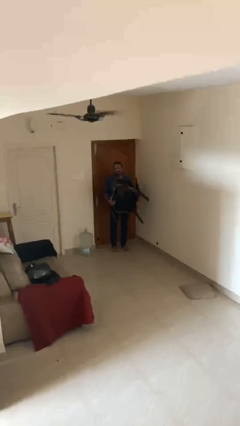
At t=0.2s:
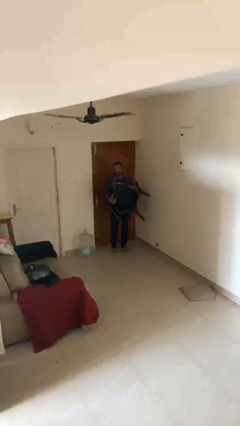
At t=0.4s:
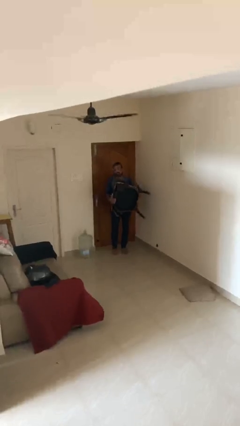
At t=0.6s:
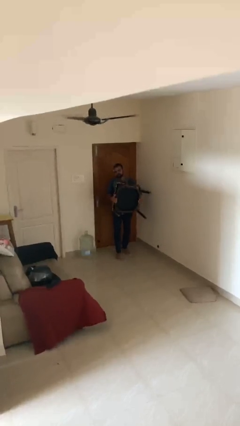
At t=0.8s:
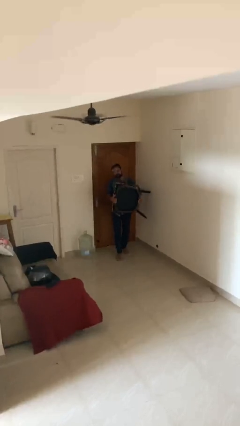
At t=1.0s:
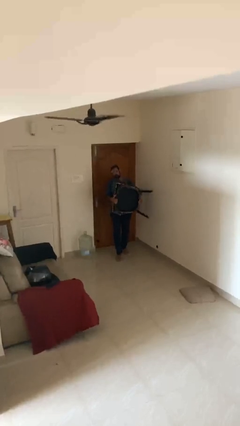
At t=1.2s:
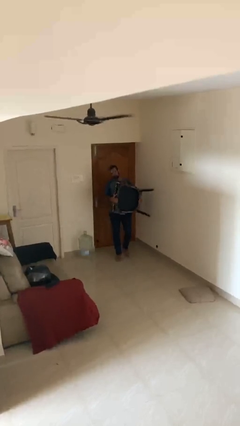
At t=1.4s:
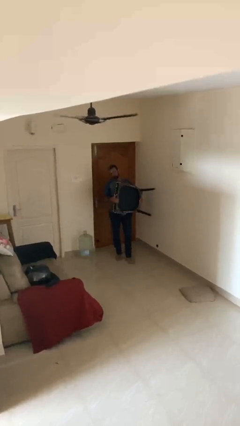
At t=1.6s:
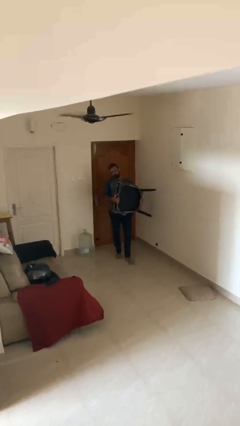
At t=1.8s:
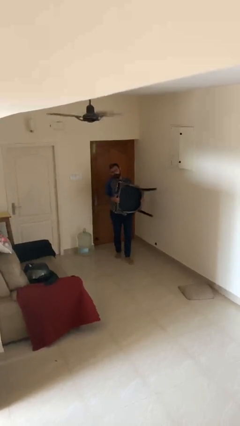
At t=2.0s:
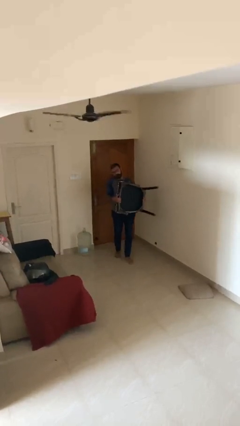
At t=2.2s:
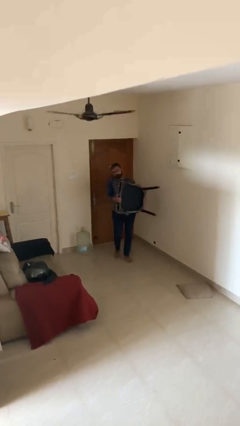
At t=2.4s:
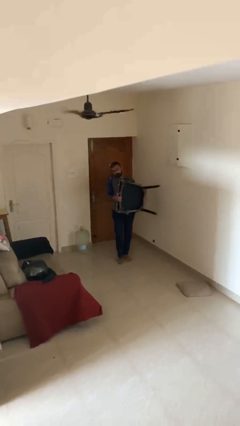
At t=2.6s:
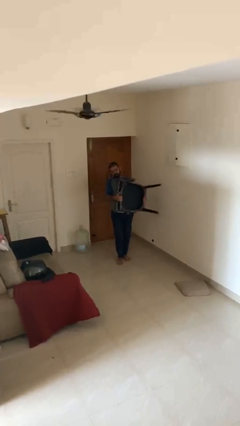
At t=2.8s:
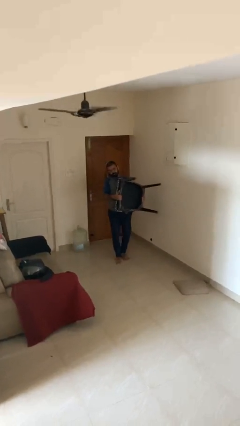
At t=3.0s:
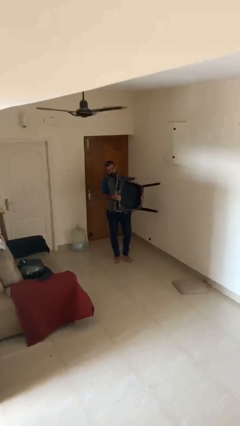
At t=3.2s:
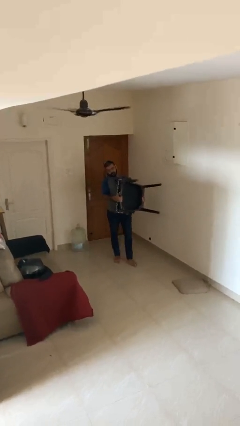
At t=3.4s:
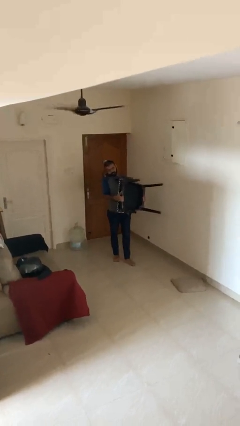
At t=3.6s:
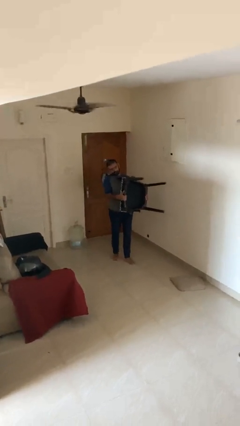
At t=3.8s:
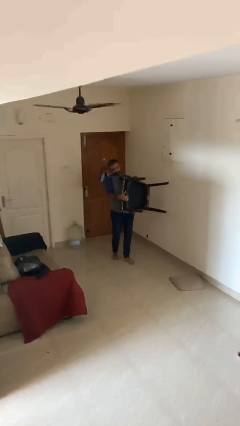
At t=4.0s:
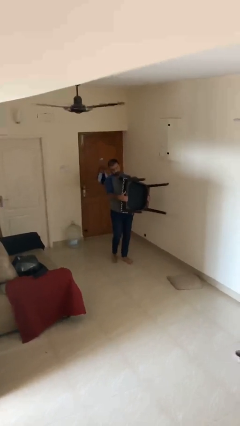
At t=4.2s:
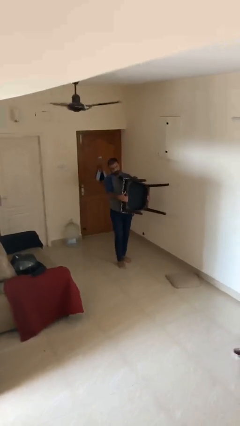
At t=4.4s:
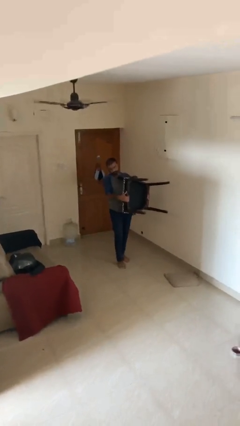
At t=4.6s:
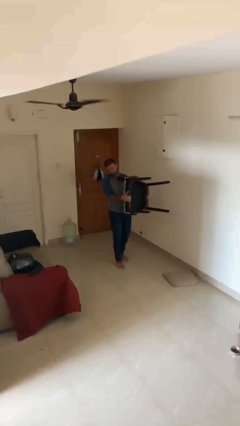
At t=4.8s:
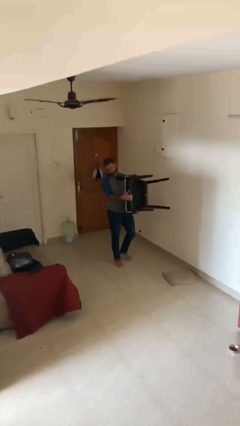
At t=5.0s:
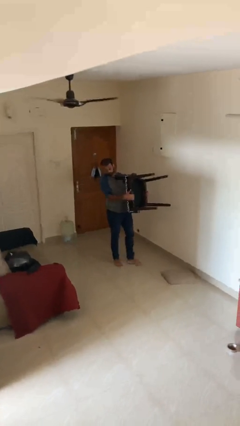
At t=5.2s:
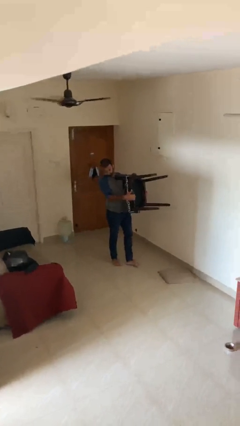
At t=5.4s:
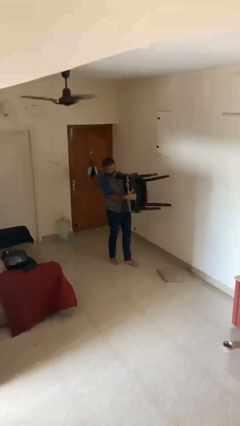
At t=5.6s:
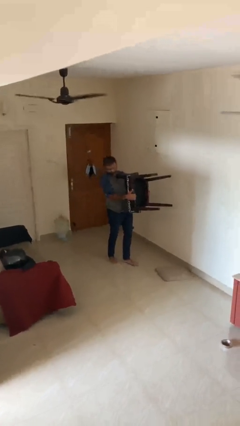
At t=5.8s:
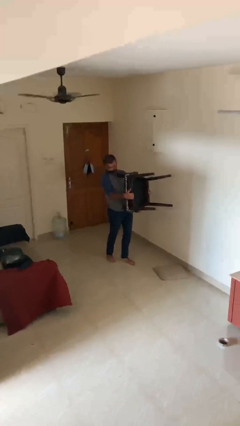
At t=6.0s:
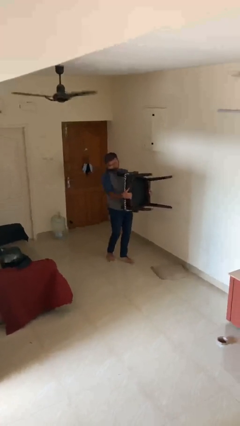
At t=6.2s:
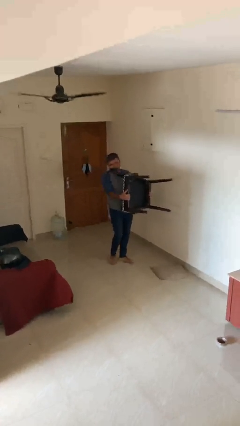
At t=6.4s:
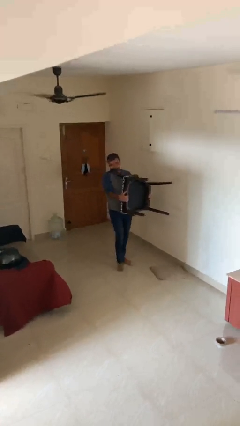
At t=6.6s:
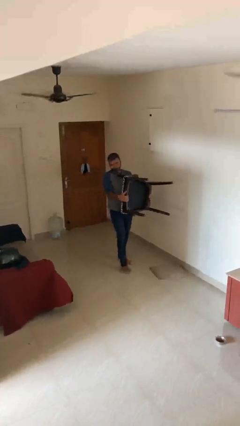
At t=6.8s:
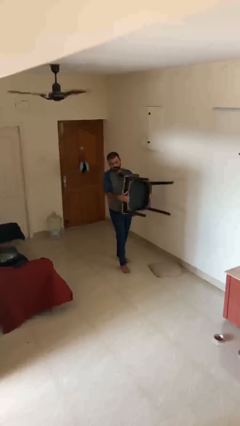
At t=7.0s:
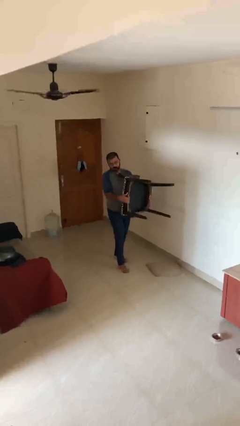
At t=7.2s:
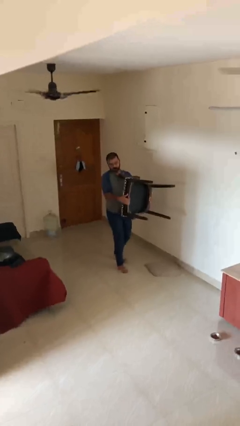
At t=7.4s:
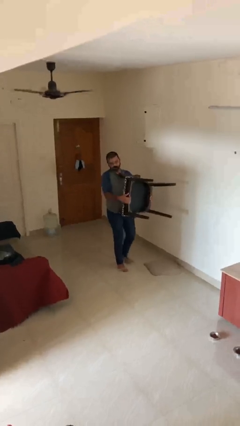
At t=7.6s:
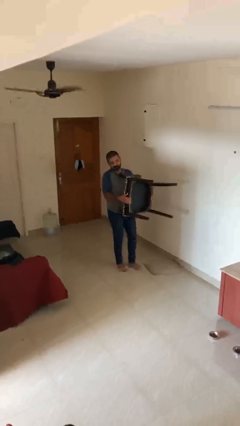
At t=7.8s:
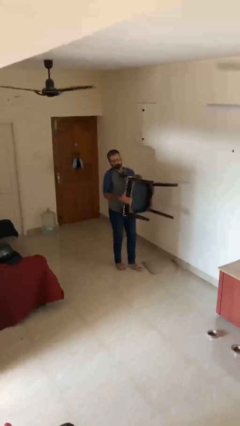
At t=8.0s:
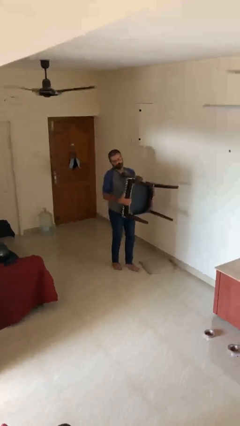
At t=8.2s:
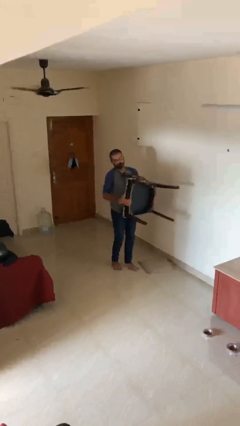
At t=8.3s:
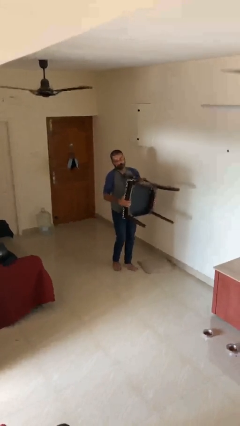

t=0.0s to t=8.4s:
person carries heavy object

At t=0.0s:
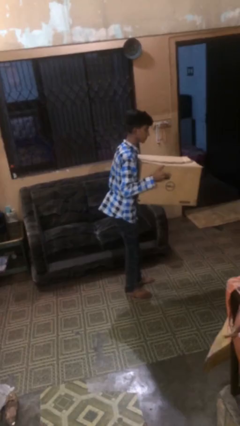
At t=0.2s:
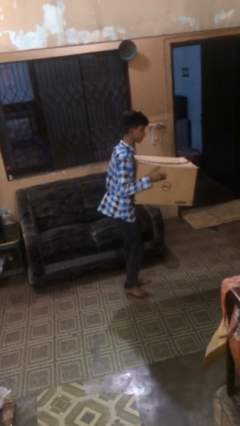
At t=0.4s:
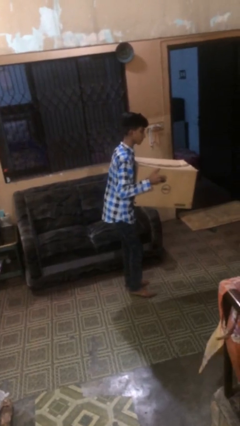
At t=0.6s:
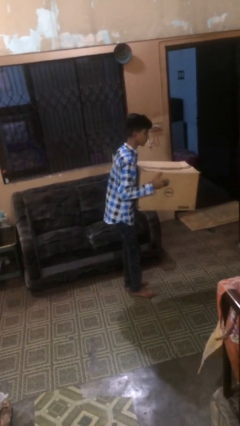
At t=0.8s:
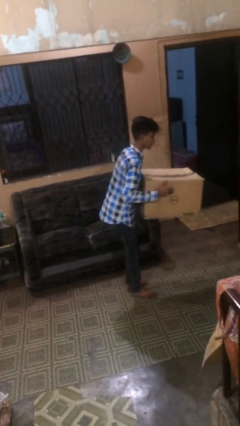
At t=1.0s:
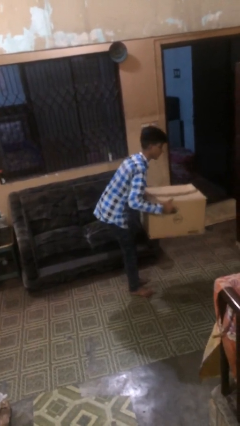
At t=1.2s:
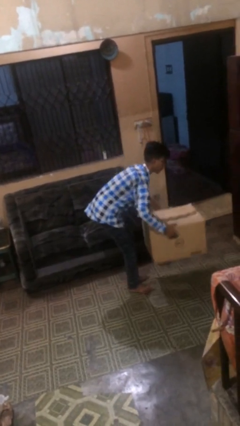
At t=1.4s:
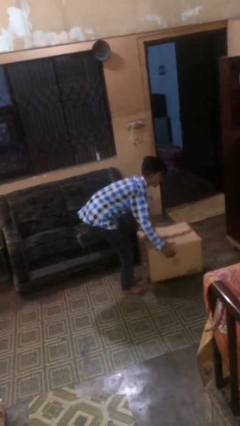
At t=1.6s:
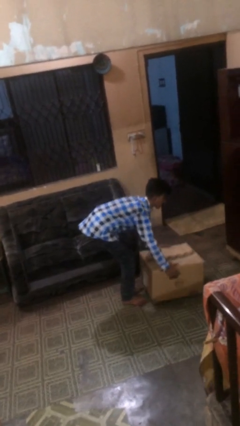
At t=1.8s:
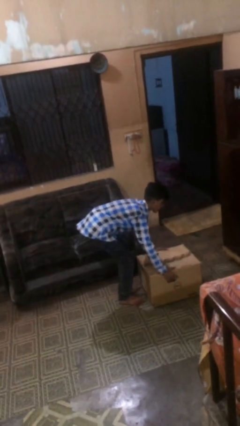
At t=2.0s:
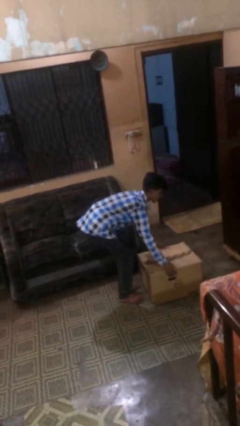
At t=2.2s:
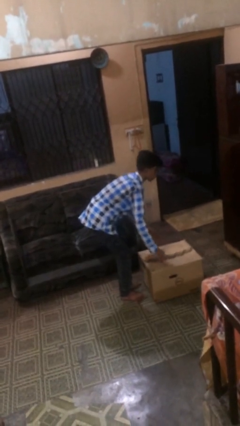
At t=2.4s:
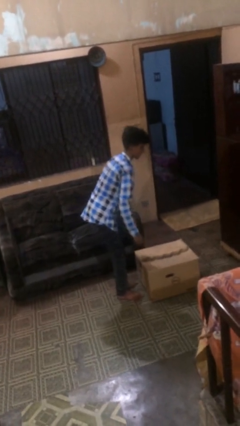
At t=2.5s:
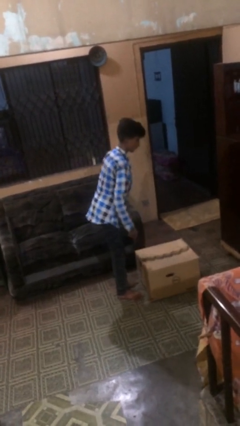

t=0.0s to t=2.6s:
person puts down object on floor

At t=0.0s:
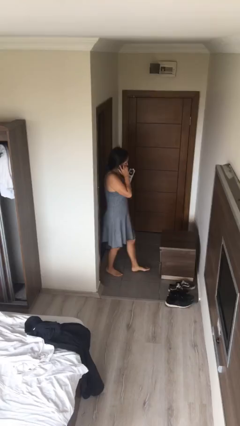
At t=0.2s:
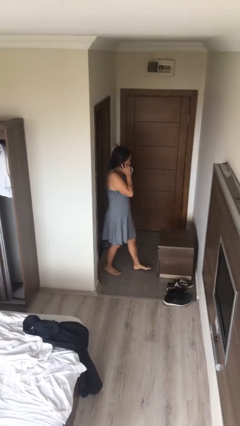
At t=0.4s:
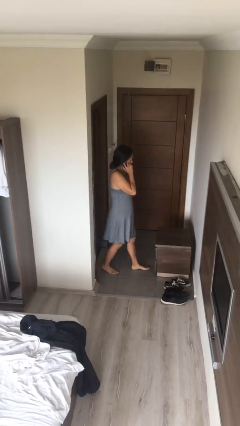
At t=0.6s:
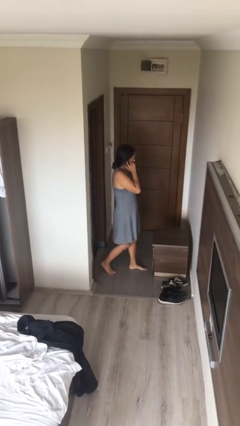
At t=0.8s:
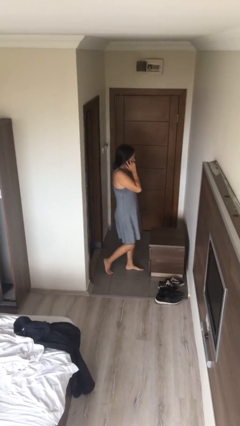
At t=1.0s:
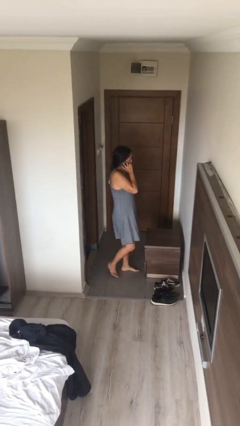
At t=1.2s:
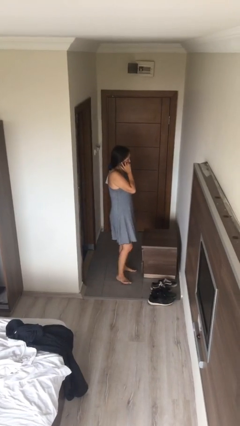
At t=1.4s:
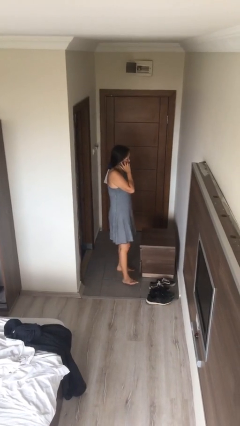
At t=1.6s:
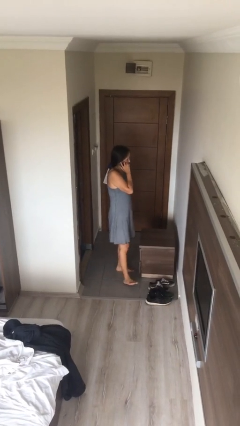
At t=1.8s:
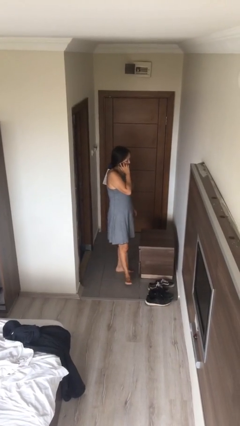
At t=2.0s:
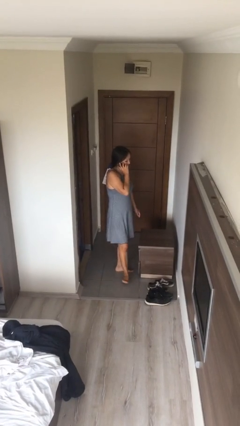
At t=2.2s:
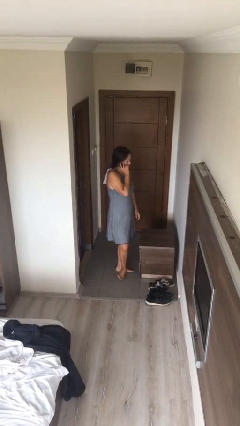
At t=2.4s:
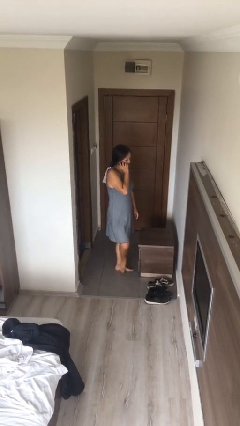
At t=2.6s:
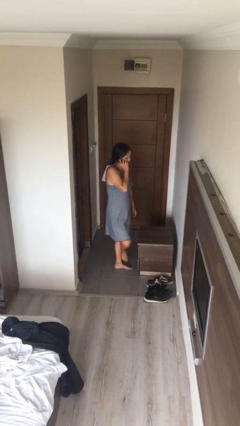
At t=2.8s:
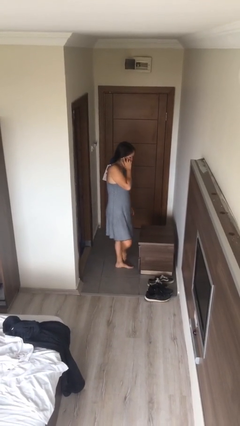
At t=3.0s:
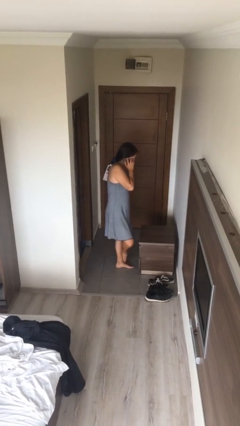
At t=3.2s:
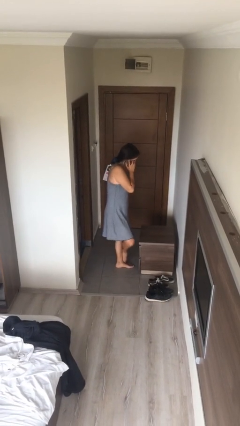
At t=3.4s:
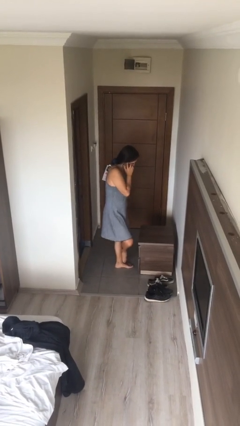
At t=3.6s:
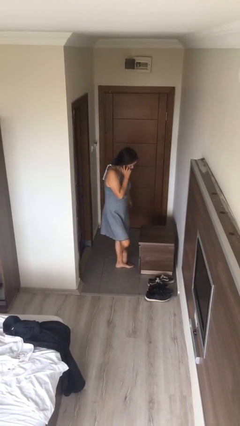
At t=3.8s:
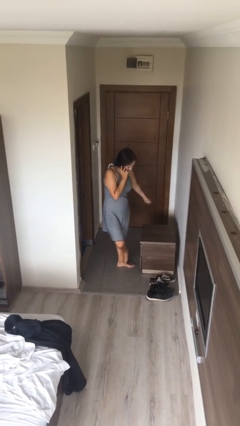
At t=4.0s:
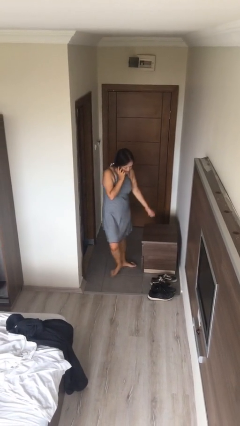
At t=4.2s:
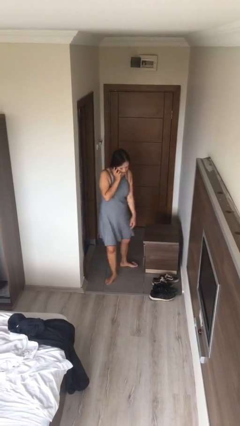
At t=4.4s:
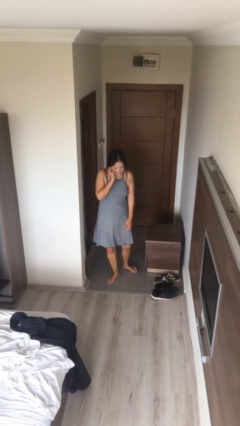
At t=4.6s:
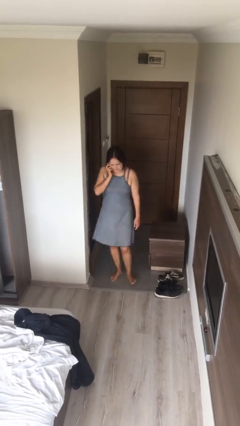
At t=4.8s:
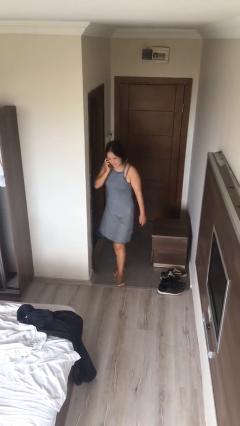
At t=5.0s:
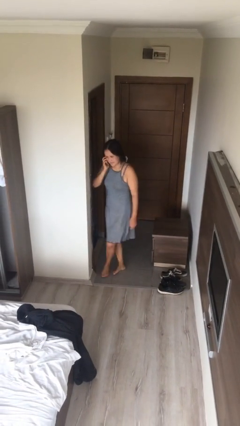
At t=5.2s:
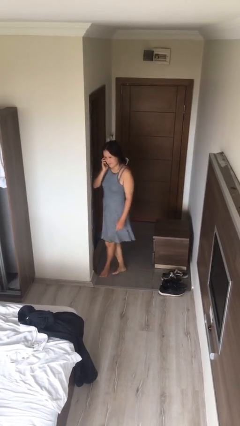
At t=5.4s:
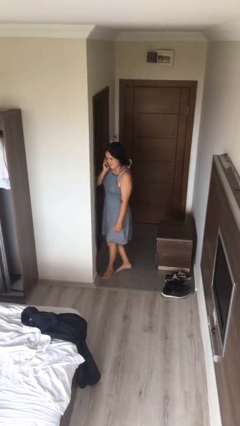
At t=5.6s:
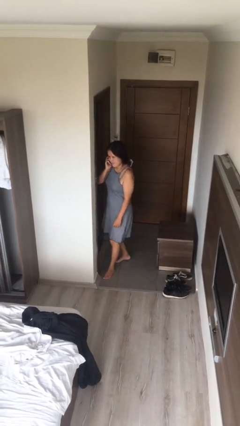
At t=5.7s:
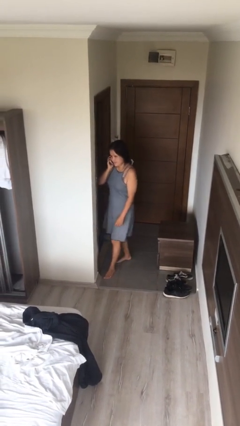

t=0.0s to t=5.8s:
person enters scene through structure

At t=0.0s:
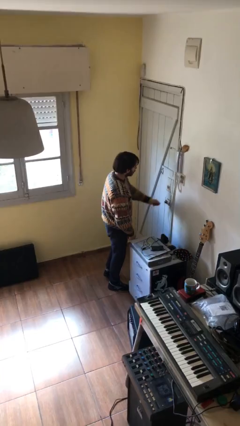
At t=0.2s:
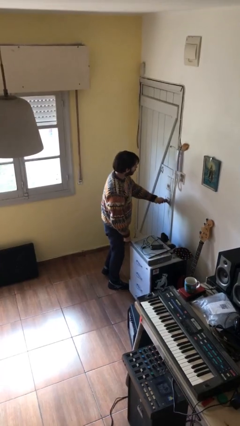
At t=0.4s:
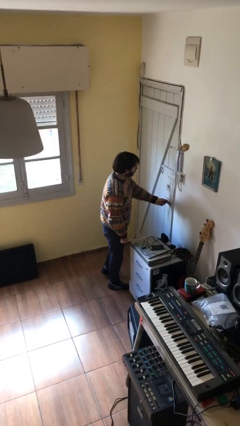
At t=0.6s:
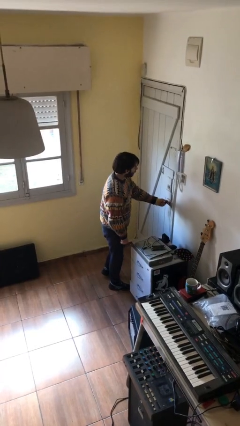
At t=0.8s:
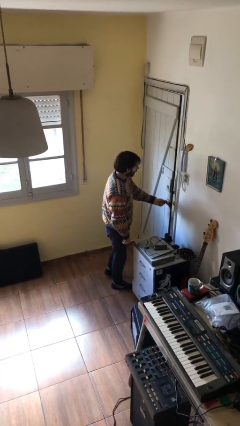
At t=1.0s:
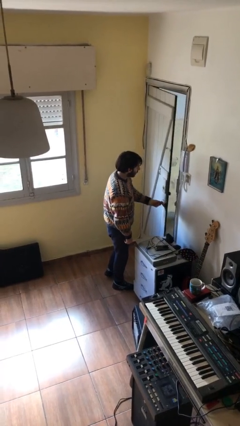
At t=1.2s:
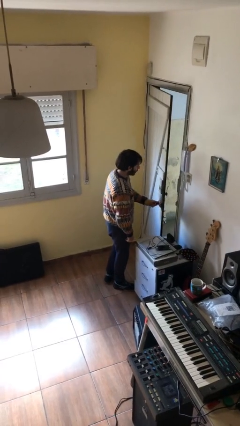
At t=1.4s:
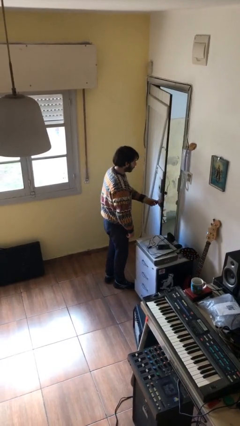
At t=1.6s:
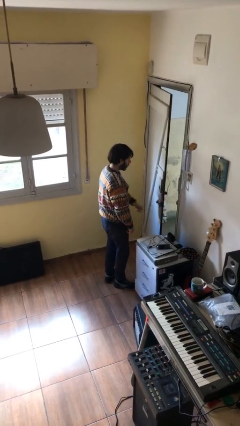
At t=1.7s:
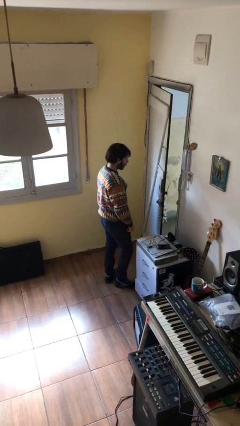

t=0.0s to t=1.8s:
person opens facility door
